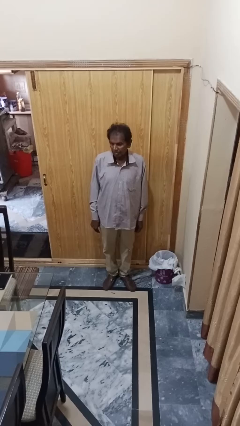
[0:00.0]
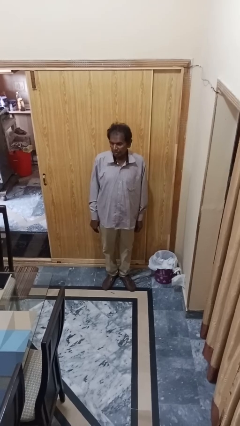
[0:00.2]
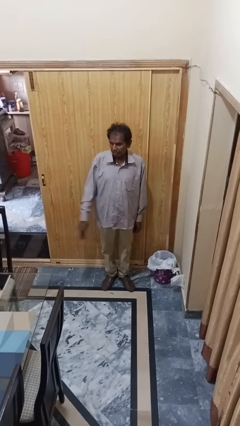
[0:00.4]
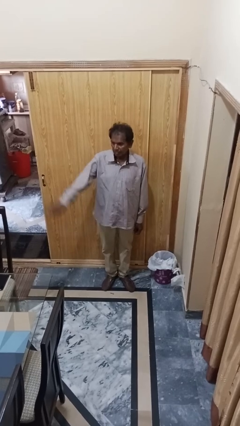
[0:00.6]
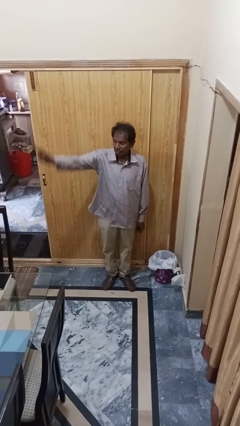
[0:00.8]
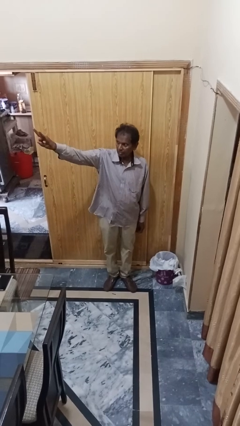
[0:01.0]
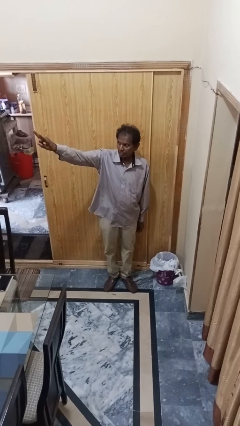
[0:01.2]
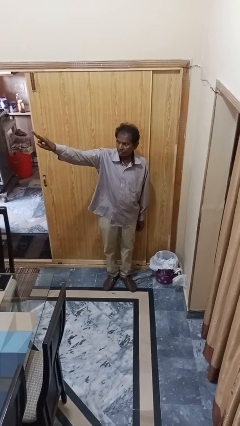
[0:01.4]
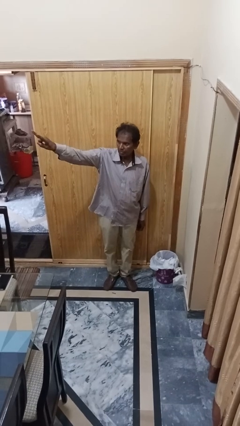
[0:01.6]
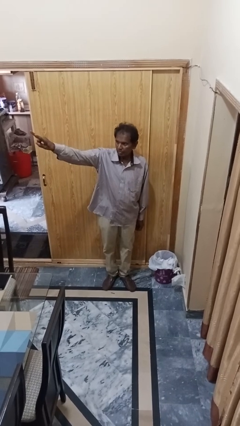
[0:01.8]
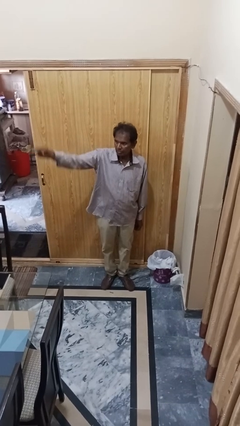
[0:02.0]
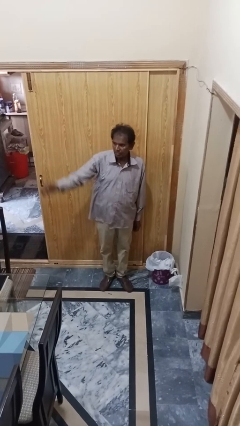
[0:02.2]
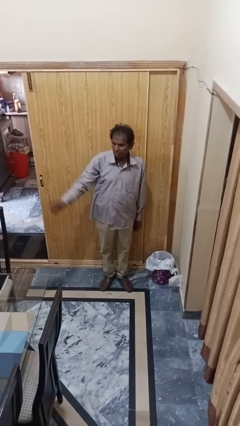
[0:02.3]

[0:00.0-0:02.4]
person gestures peace

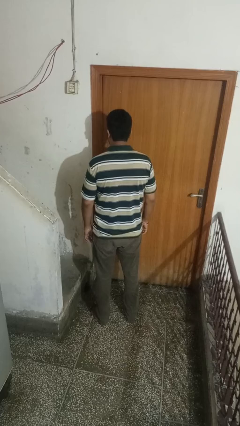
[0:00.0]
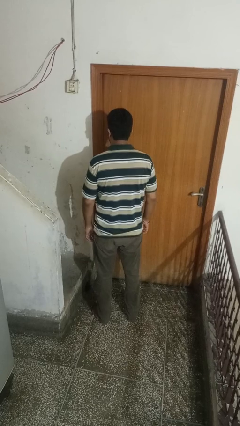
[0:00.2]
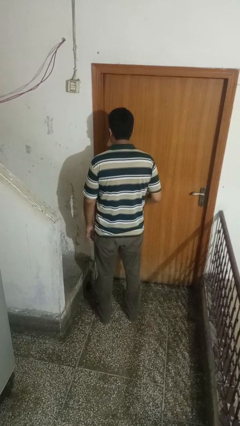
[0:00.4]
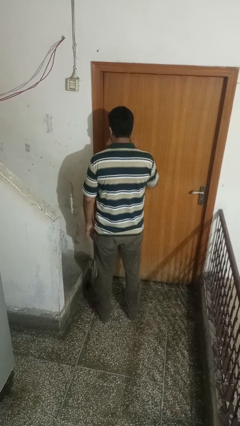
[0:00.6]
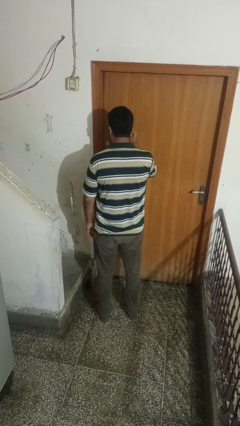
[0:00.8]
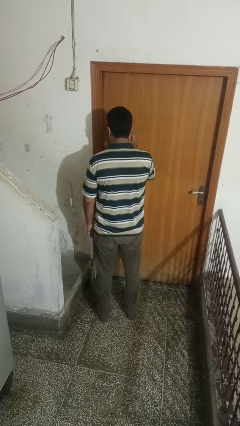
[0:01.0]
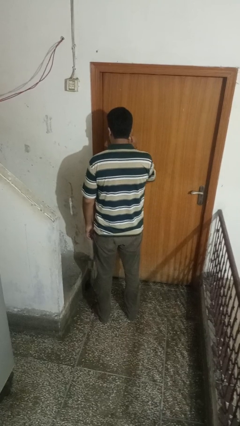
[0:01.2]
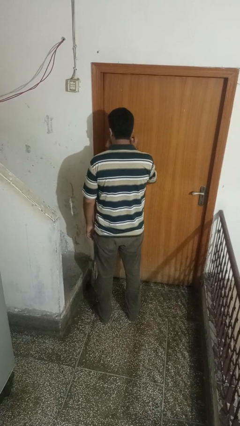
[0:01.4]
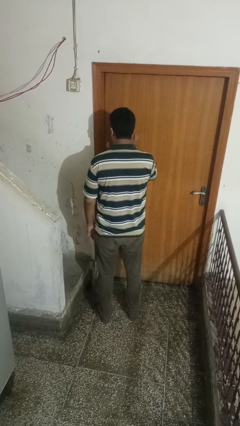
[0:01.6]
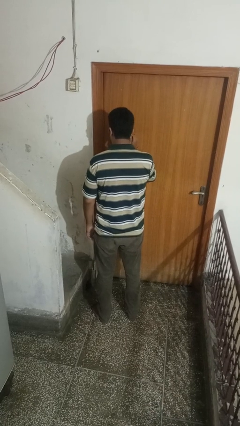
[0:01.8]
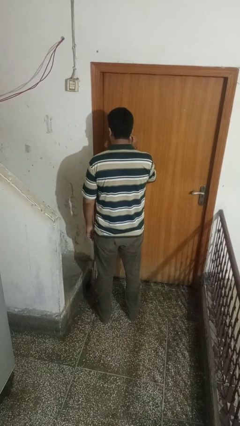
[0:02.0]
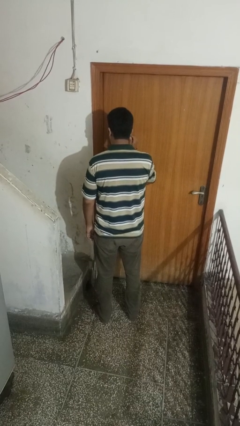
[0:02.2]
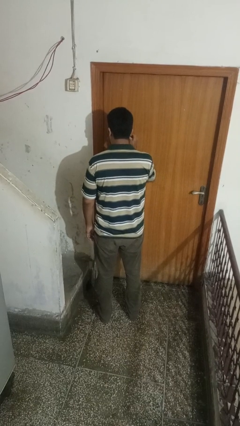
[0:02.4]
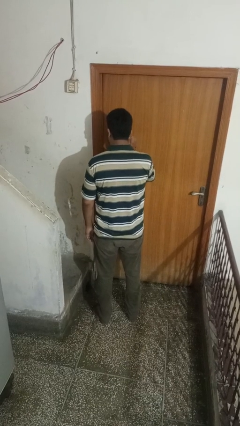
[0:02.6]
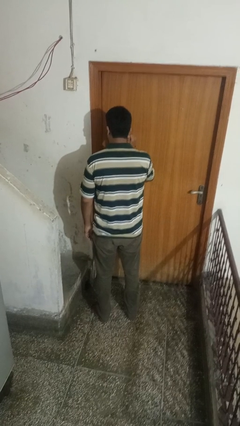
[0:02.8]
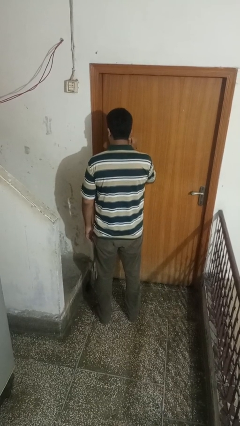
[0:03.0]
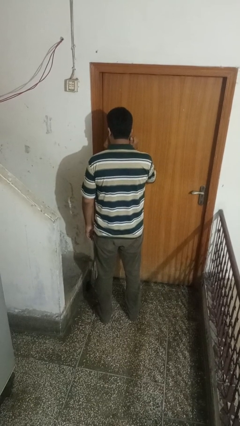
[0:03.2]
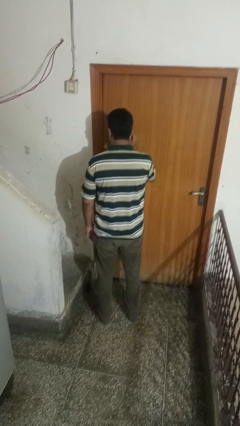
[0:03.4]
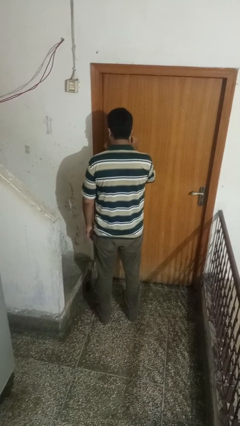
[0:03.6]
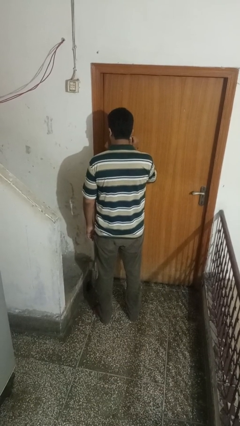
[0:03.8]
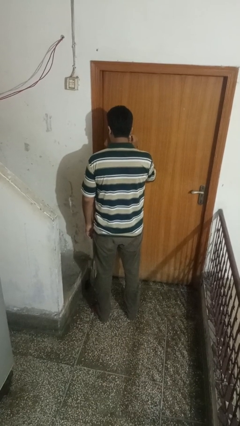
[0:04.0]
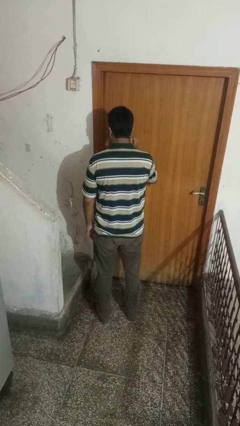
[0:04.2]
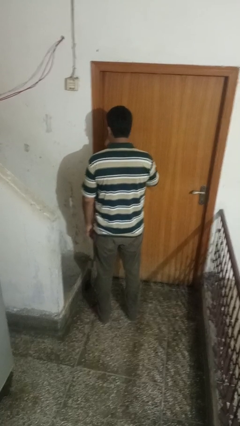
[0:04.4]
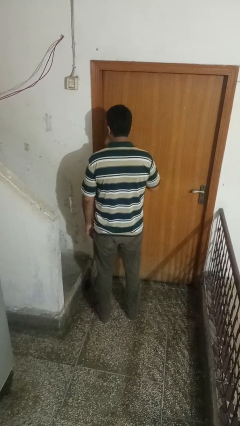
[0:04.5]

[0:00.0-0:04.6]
person touches earlobe

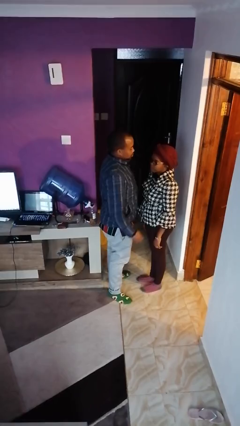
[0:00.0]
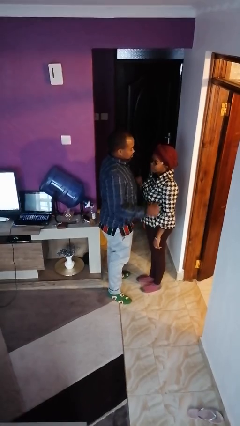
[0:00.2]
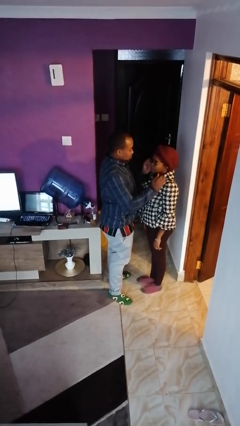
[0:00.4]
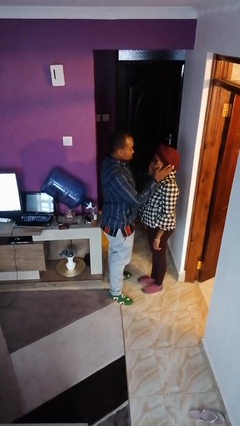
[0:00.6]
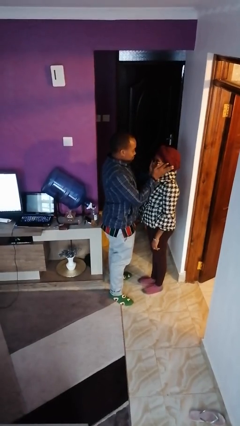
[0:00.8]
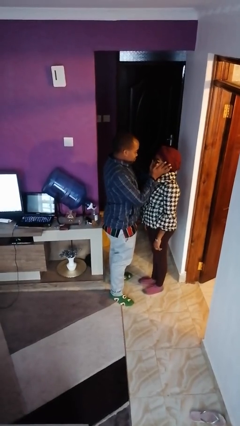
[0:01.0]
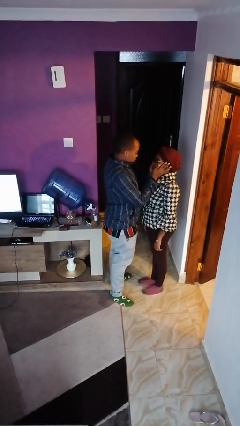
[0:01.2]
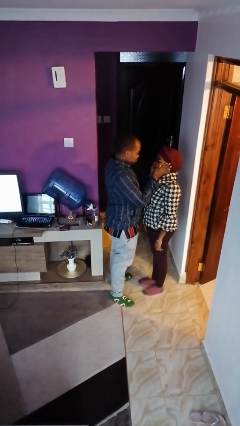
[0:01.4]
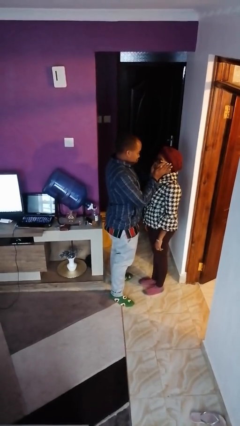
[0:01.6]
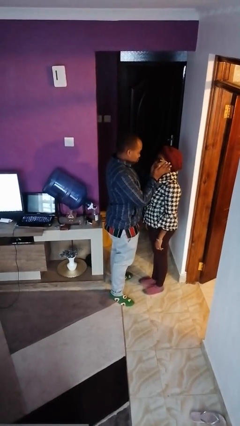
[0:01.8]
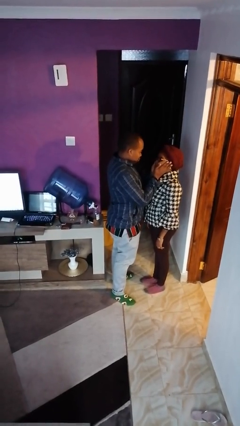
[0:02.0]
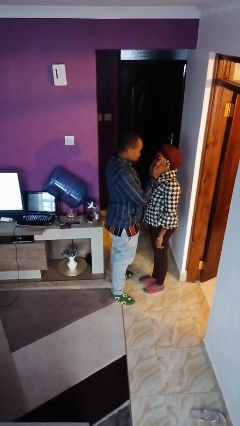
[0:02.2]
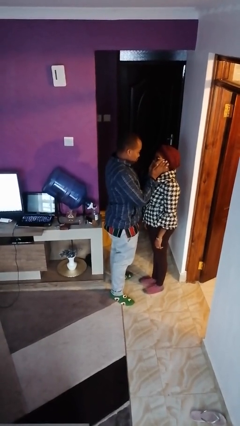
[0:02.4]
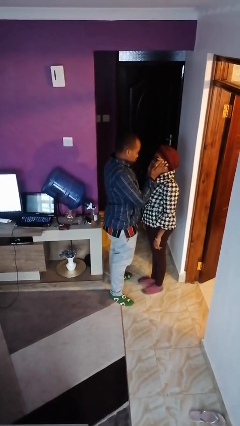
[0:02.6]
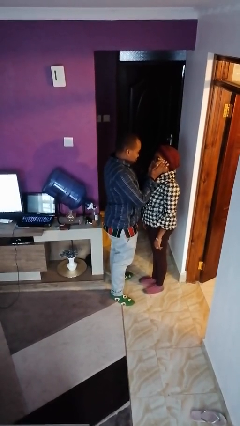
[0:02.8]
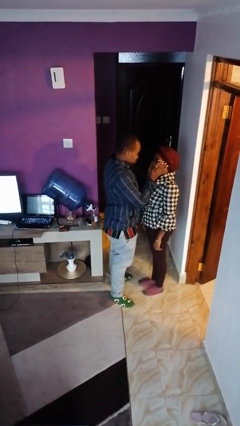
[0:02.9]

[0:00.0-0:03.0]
person touches face of person

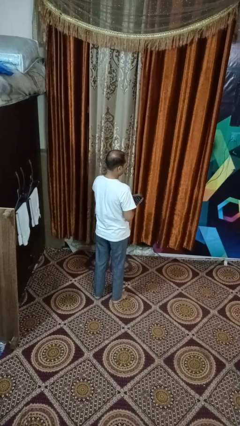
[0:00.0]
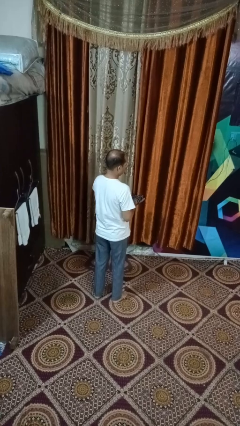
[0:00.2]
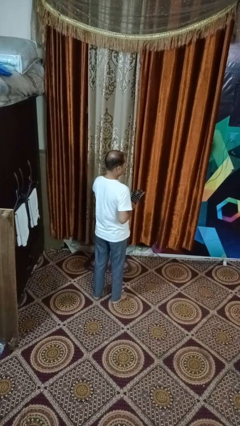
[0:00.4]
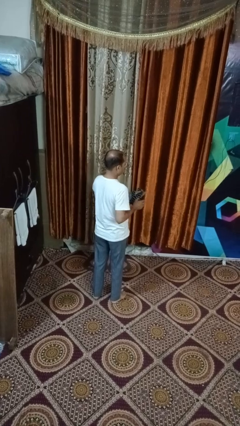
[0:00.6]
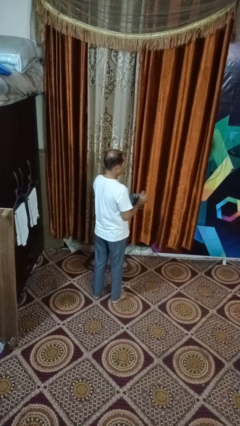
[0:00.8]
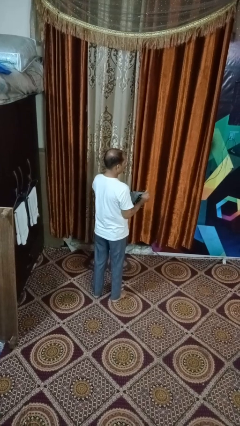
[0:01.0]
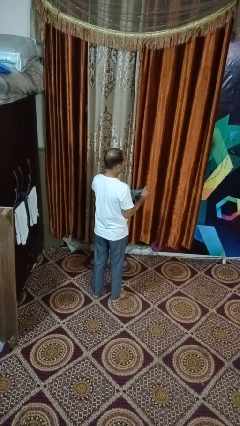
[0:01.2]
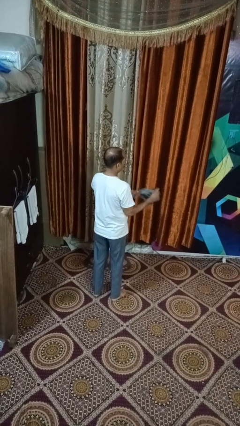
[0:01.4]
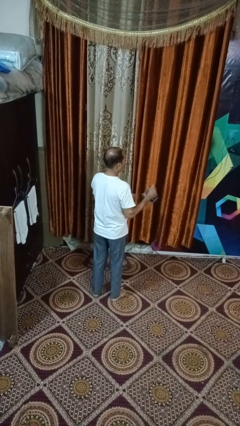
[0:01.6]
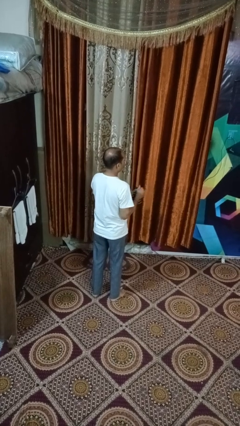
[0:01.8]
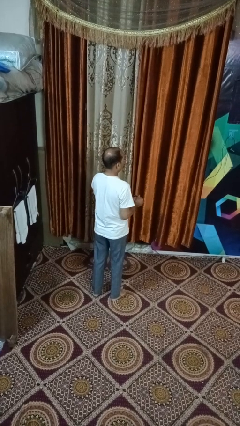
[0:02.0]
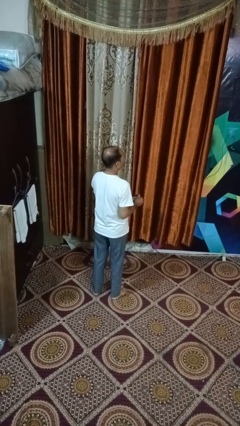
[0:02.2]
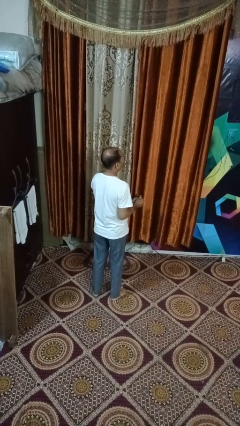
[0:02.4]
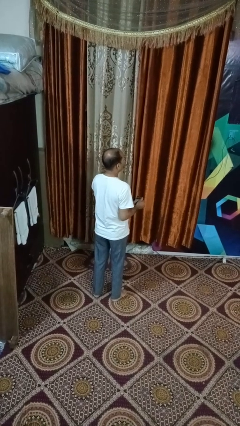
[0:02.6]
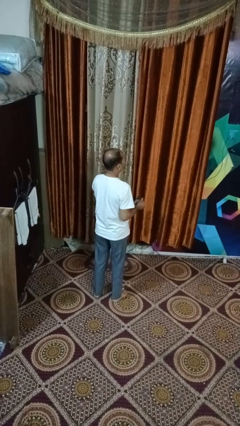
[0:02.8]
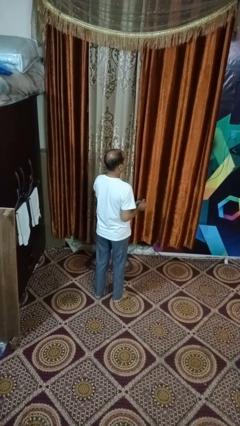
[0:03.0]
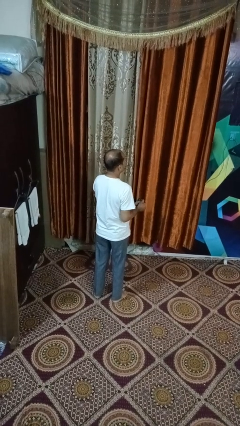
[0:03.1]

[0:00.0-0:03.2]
person takes off gloves

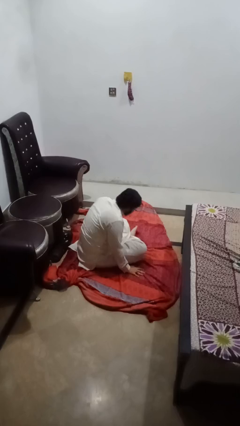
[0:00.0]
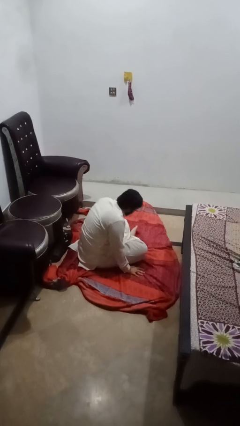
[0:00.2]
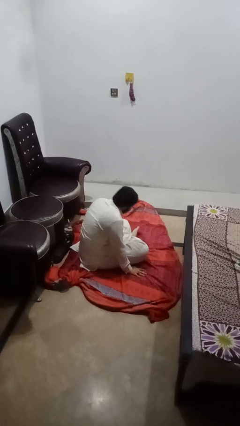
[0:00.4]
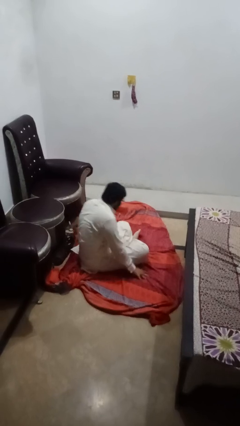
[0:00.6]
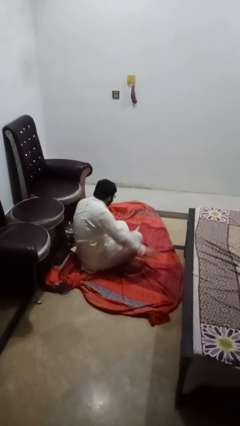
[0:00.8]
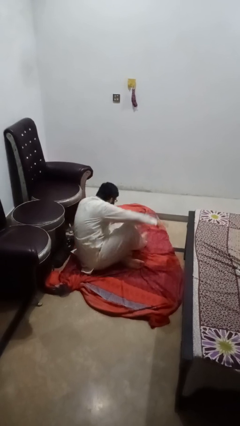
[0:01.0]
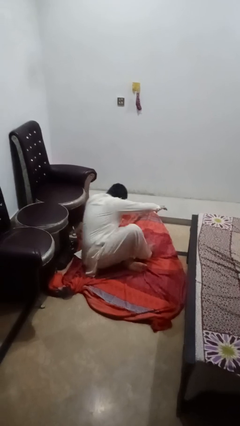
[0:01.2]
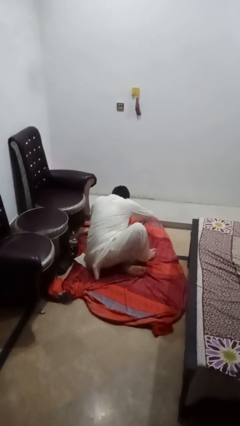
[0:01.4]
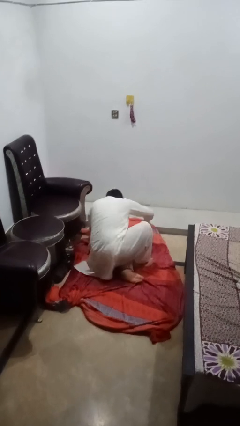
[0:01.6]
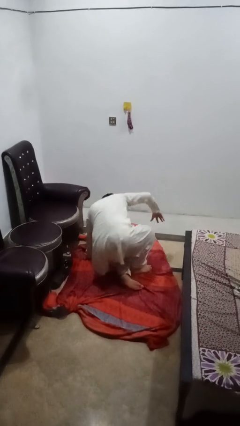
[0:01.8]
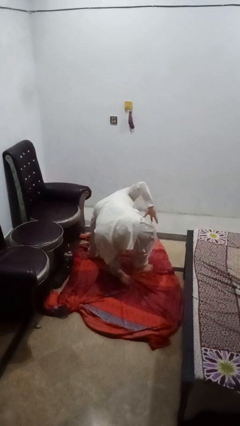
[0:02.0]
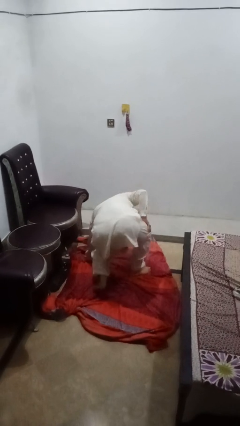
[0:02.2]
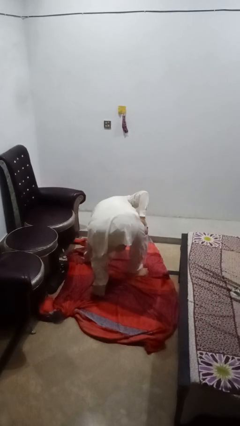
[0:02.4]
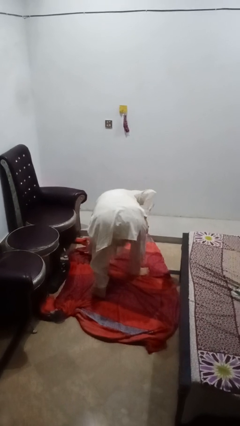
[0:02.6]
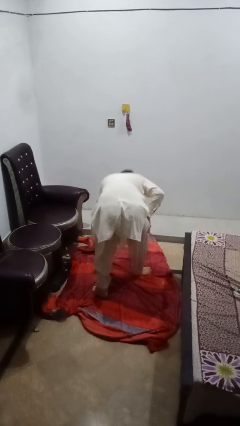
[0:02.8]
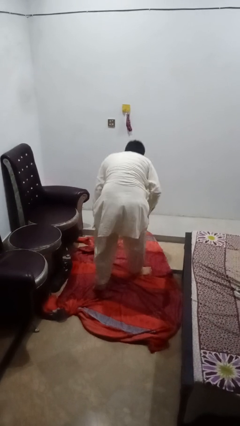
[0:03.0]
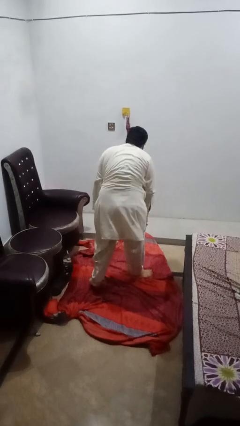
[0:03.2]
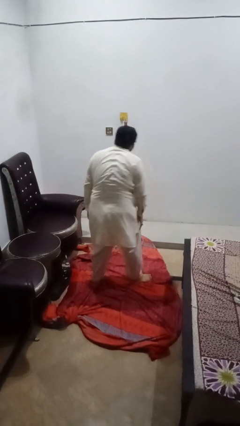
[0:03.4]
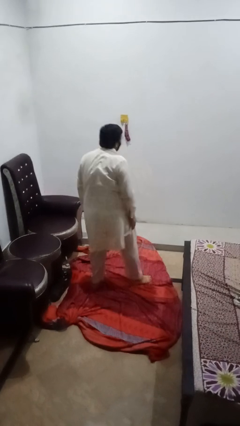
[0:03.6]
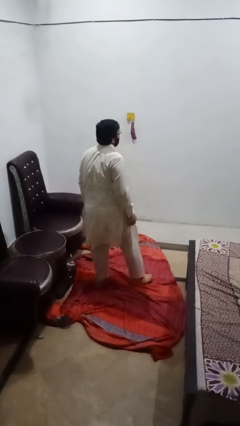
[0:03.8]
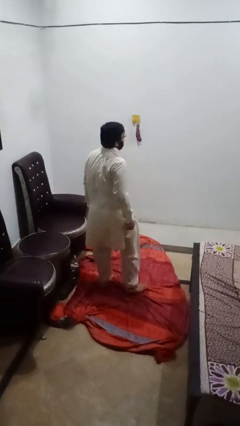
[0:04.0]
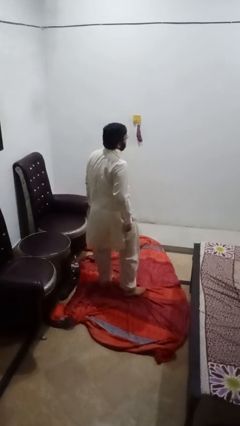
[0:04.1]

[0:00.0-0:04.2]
person stands up from floor
